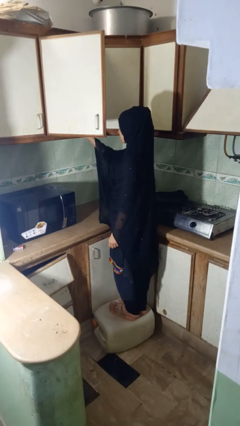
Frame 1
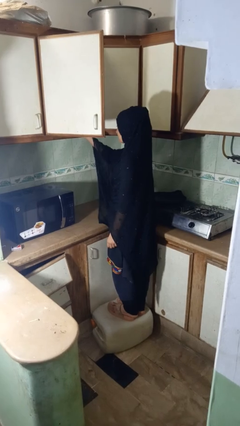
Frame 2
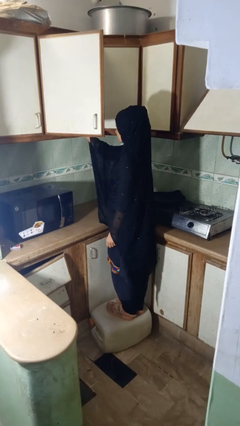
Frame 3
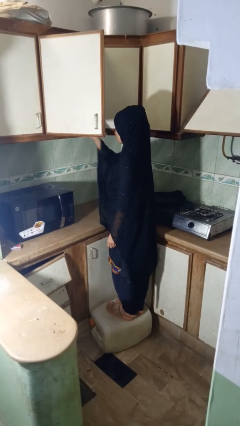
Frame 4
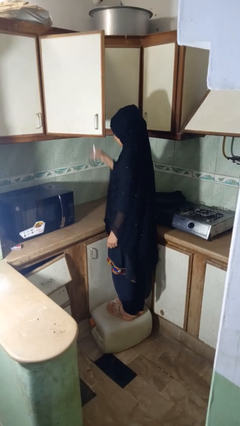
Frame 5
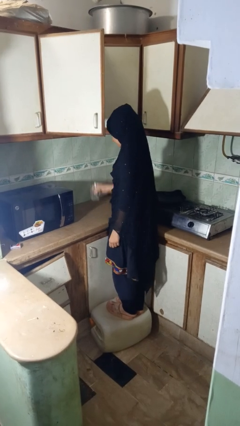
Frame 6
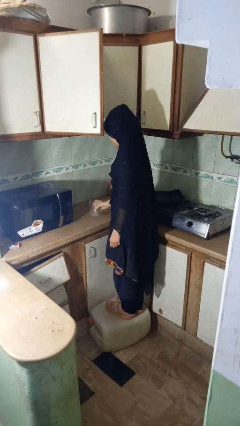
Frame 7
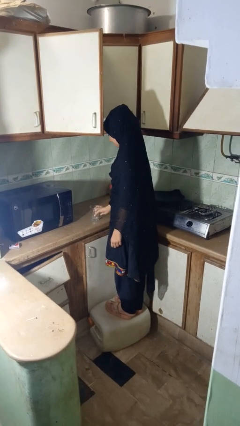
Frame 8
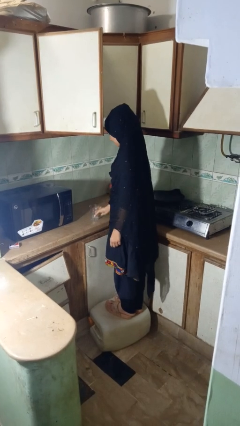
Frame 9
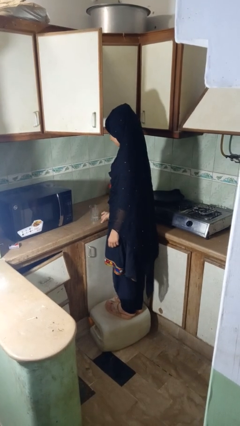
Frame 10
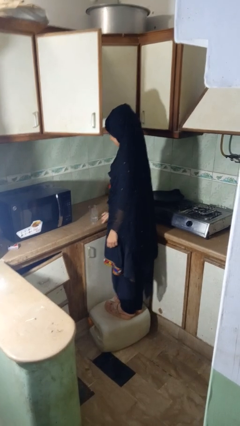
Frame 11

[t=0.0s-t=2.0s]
person puts down object into cabinet

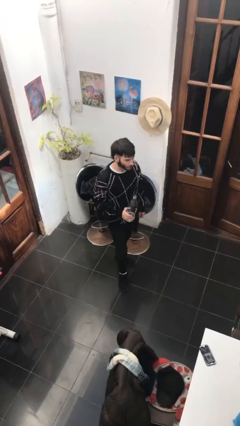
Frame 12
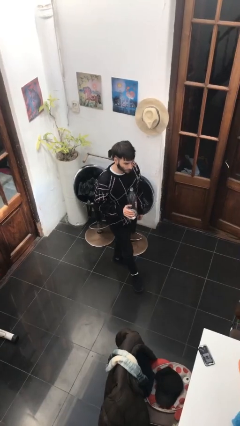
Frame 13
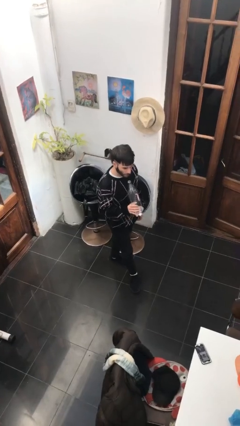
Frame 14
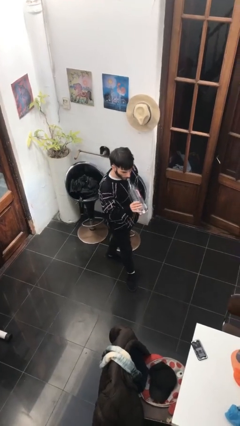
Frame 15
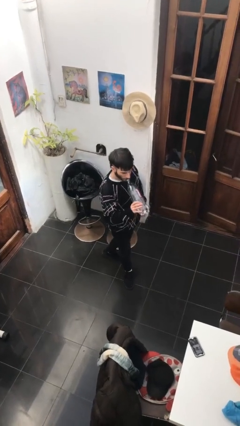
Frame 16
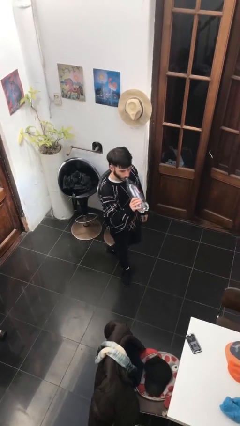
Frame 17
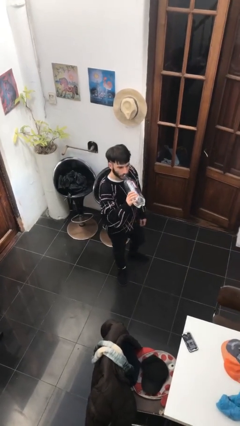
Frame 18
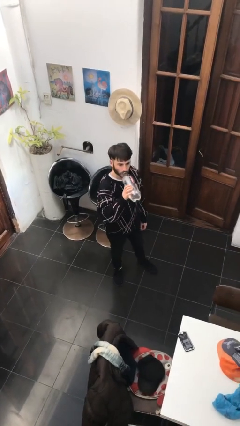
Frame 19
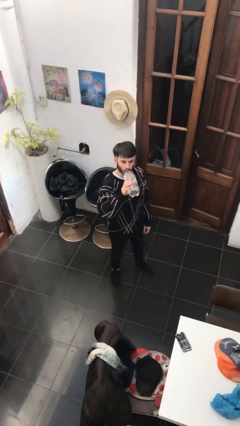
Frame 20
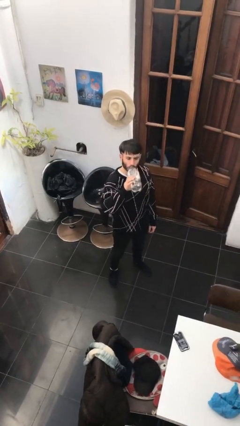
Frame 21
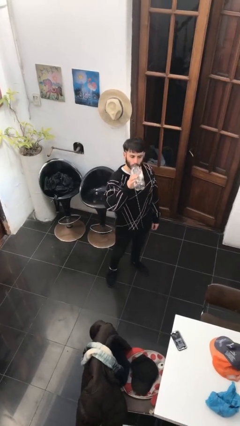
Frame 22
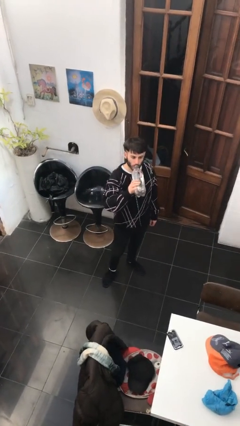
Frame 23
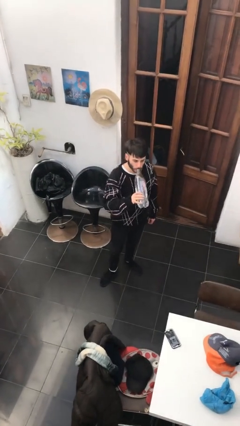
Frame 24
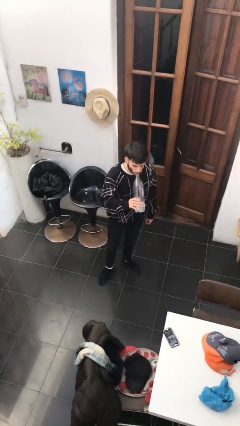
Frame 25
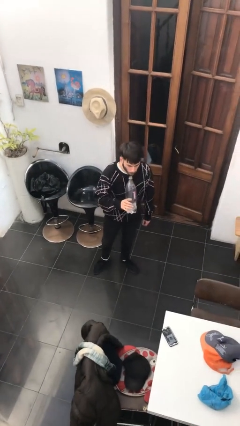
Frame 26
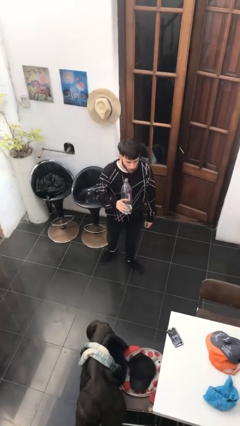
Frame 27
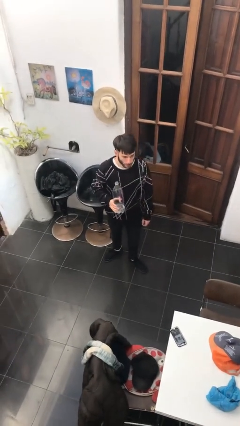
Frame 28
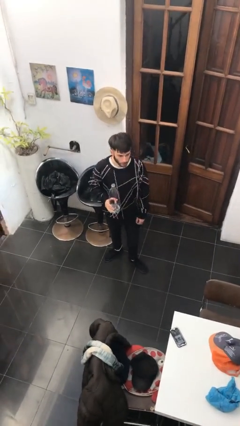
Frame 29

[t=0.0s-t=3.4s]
person drinks from bottle

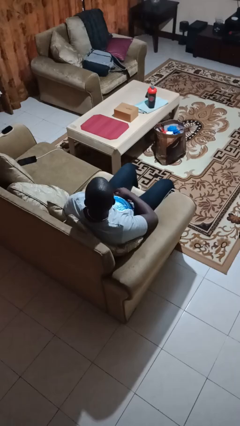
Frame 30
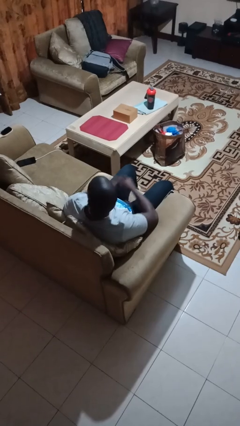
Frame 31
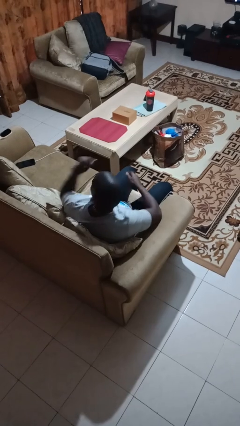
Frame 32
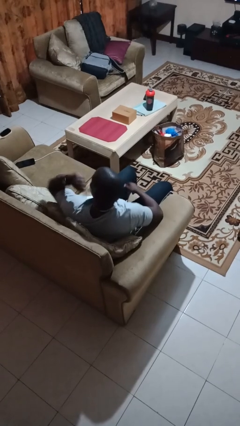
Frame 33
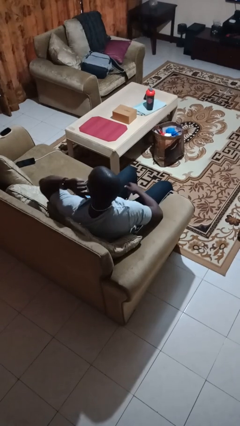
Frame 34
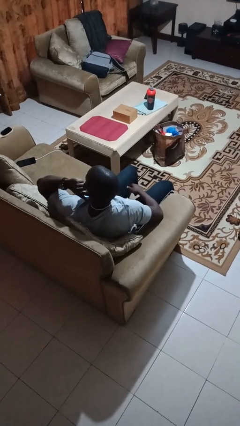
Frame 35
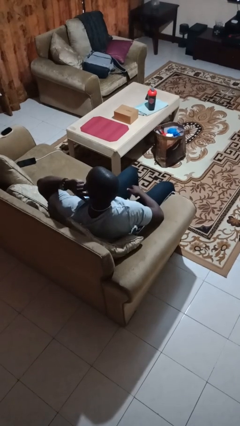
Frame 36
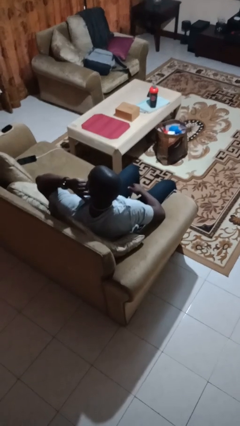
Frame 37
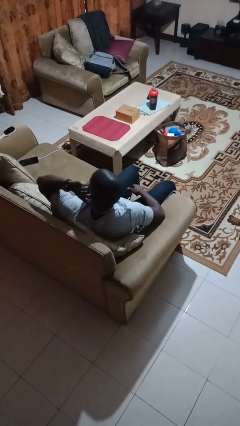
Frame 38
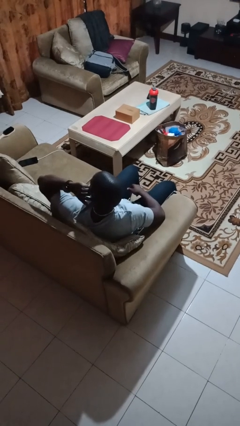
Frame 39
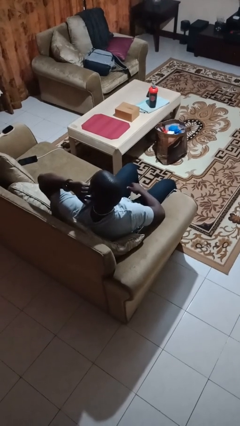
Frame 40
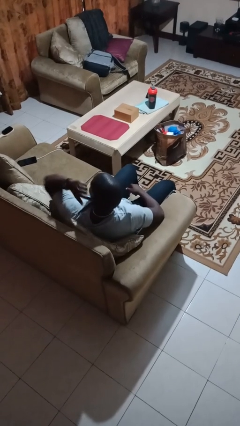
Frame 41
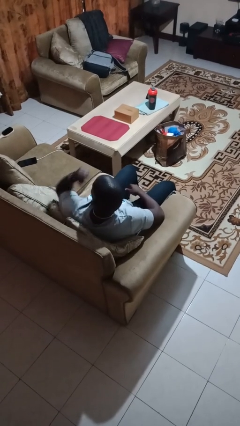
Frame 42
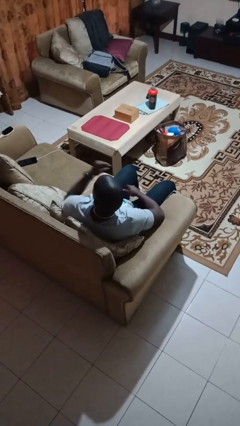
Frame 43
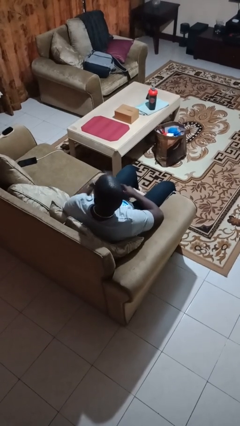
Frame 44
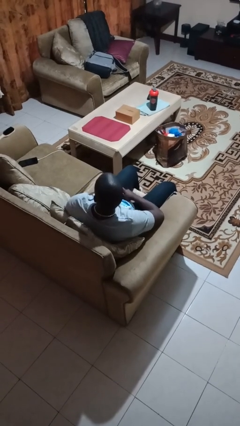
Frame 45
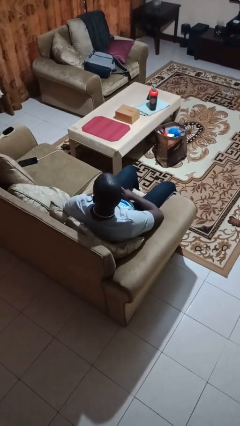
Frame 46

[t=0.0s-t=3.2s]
person gestures listen closely

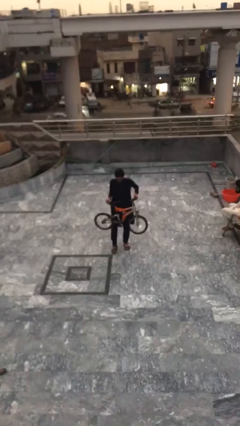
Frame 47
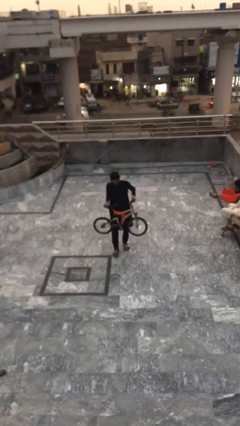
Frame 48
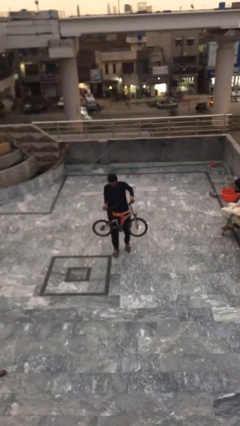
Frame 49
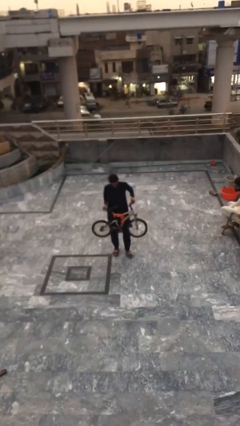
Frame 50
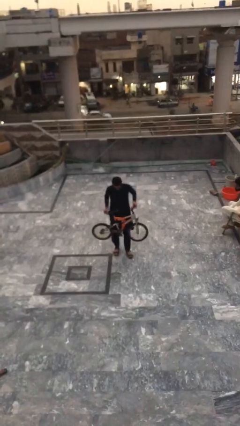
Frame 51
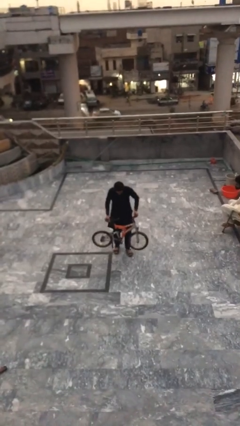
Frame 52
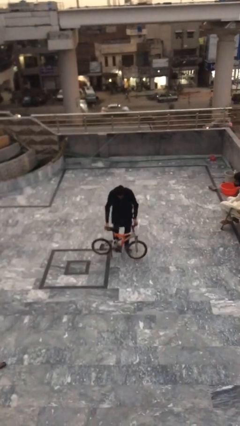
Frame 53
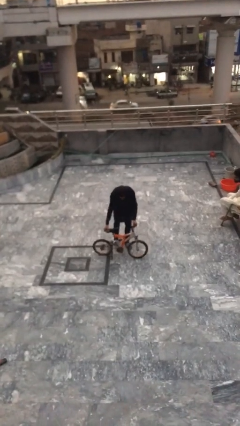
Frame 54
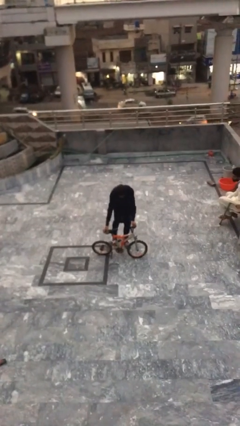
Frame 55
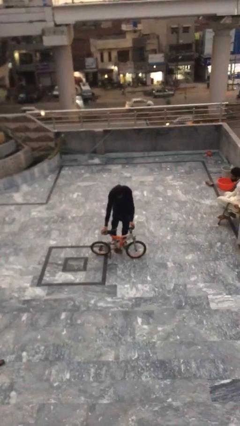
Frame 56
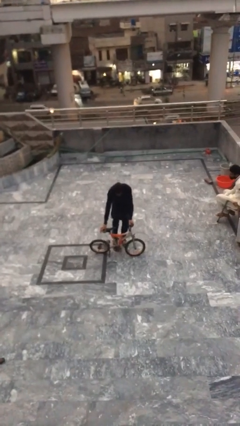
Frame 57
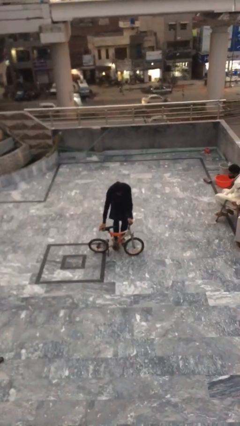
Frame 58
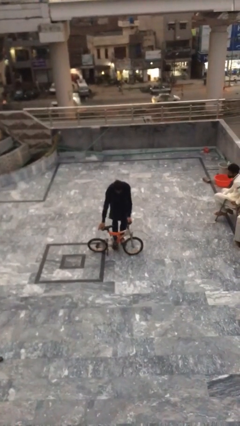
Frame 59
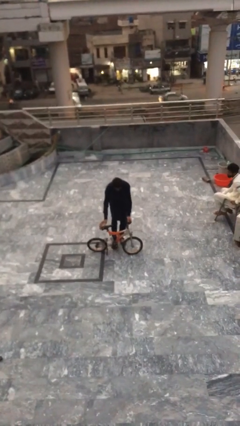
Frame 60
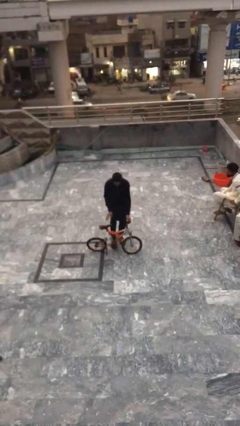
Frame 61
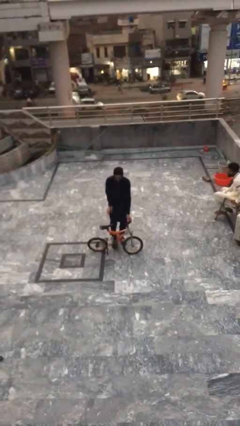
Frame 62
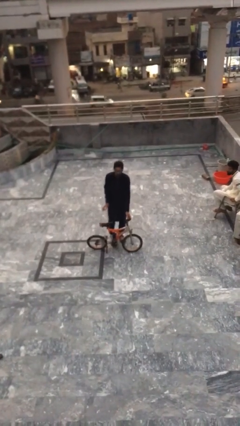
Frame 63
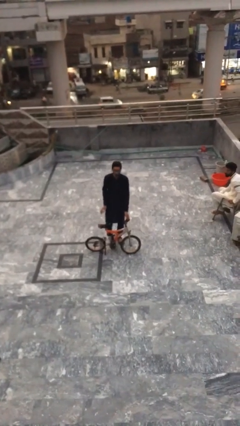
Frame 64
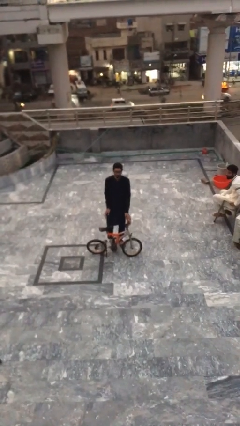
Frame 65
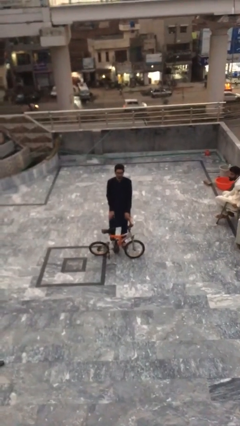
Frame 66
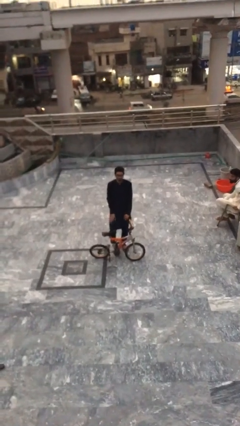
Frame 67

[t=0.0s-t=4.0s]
person puts down object on floor

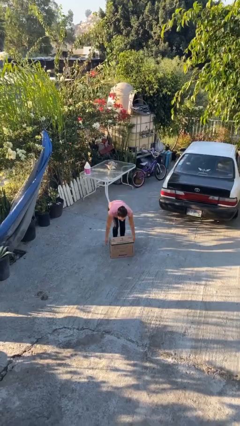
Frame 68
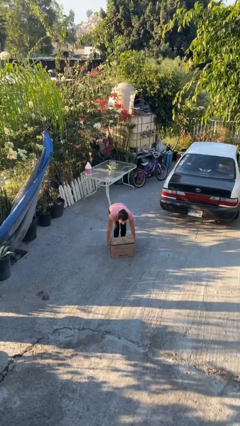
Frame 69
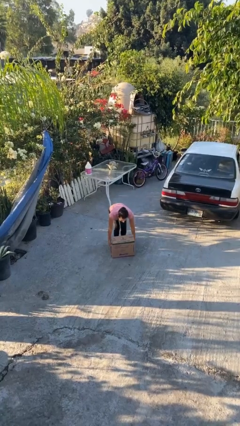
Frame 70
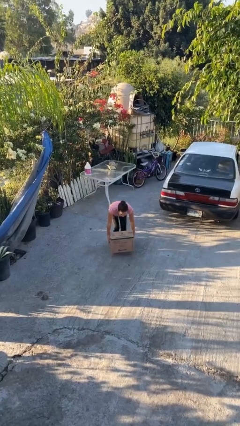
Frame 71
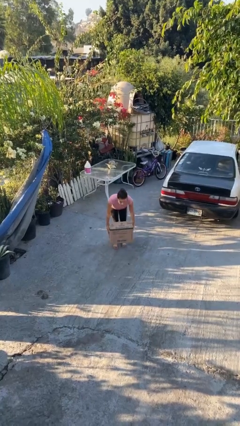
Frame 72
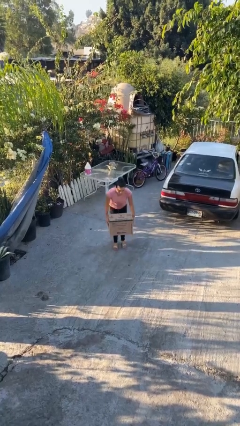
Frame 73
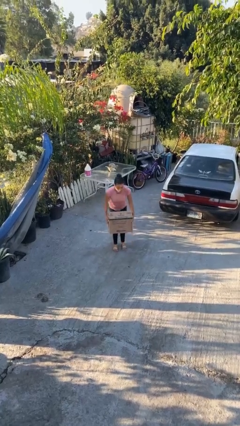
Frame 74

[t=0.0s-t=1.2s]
person picks up object from floor

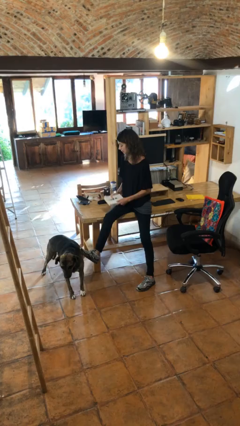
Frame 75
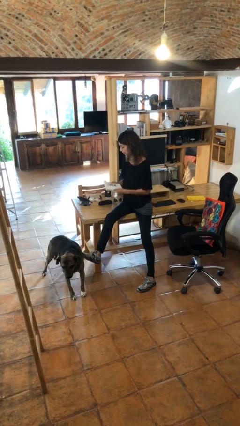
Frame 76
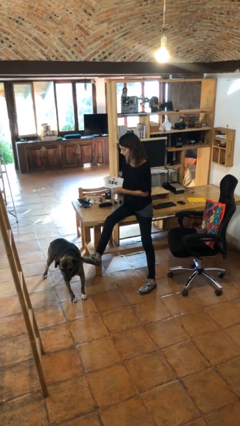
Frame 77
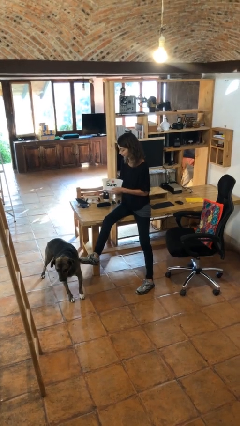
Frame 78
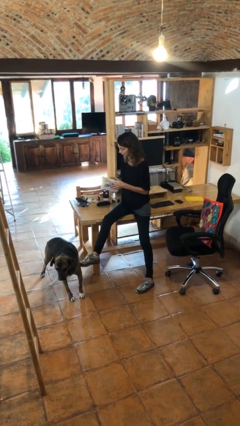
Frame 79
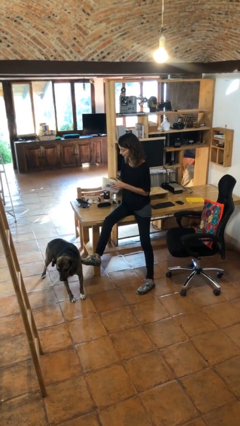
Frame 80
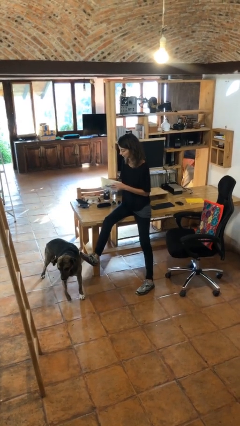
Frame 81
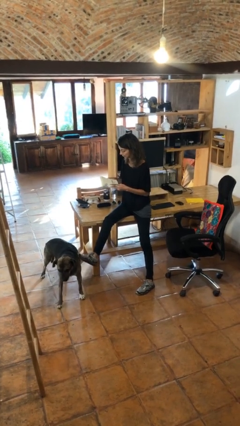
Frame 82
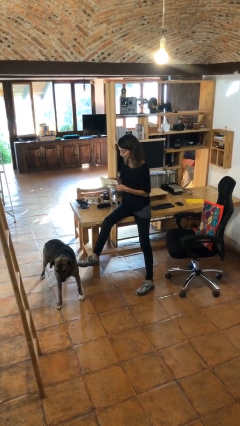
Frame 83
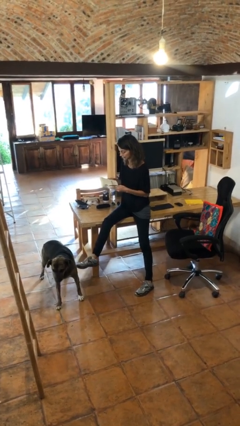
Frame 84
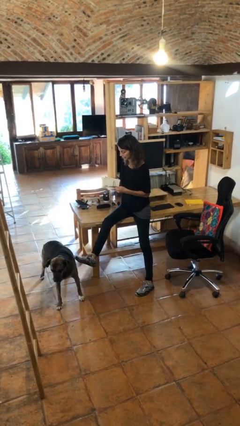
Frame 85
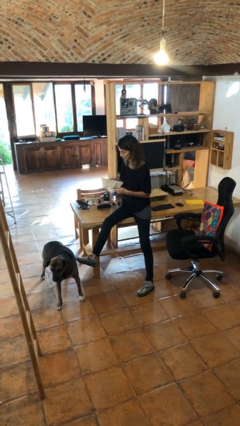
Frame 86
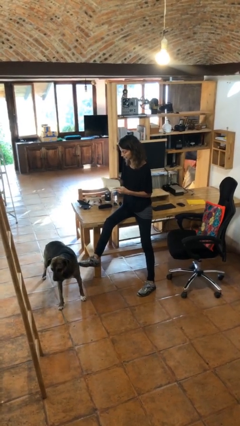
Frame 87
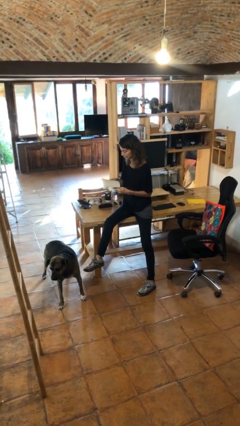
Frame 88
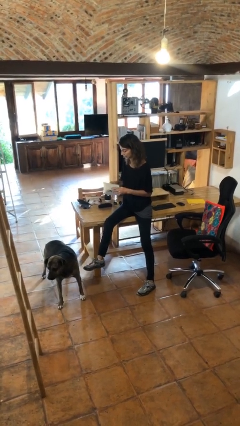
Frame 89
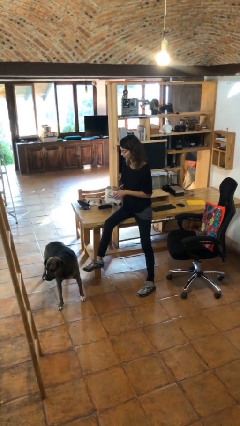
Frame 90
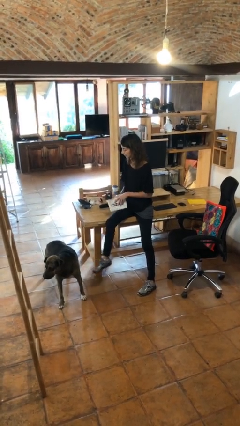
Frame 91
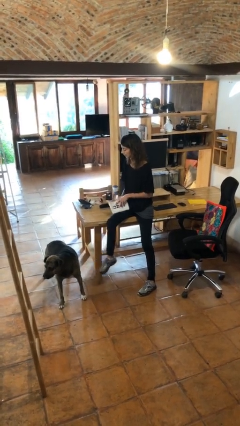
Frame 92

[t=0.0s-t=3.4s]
person reads book
